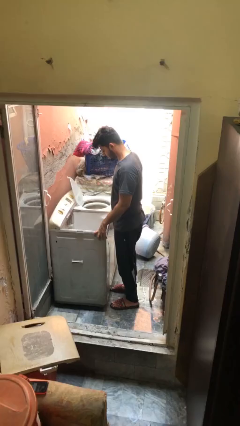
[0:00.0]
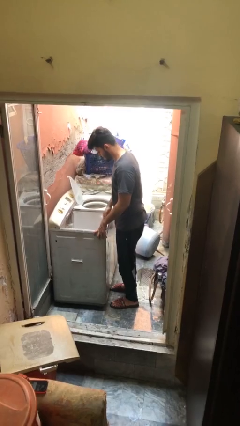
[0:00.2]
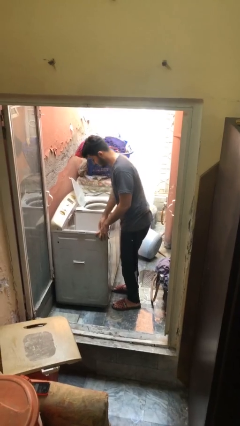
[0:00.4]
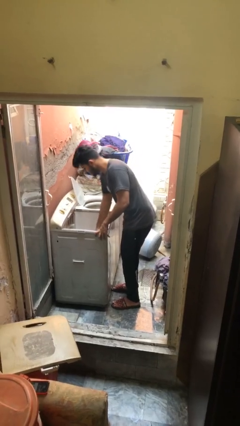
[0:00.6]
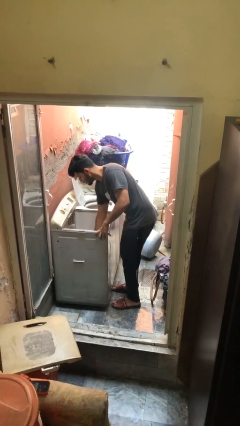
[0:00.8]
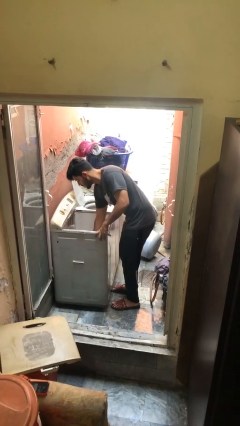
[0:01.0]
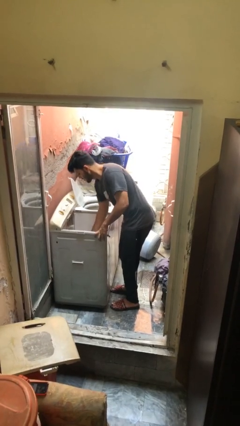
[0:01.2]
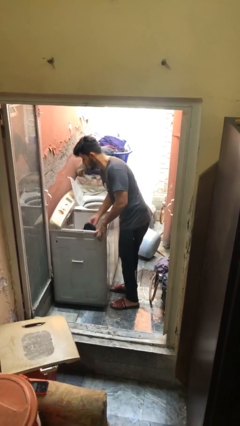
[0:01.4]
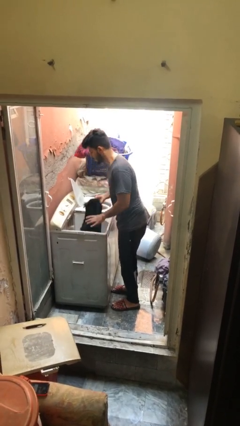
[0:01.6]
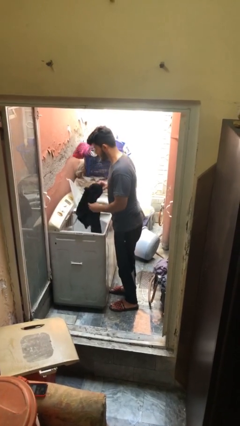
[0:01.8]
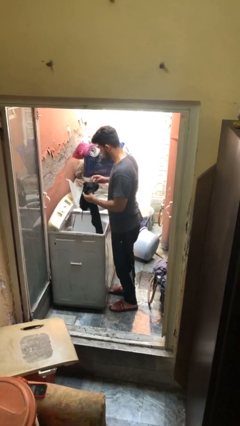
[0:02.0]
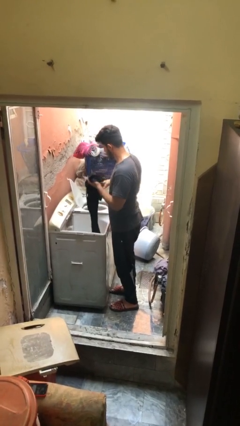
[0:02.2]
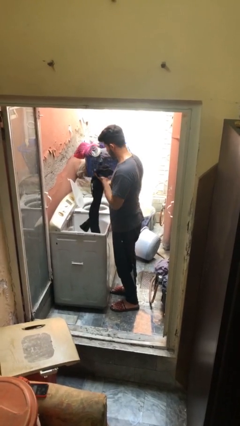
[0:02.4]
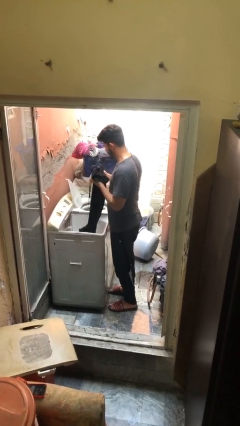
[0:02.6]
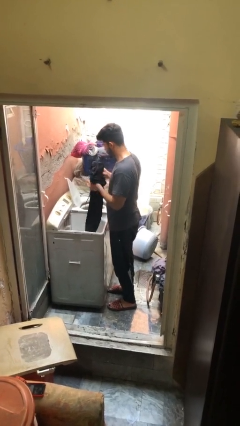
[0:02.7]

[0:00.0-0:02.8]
person unloads clotheswasher

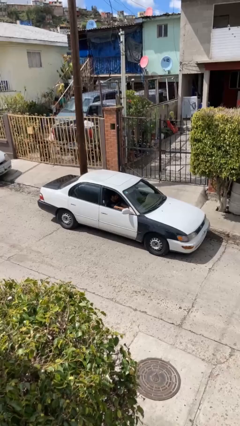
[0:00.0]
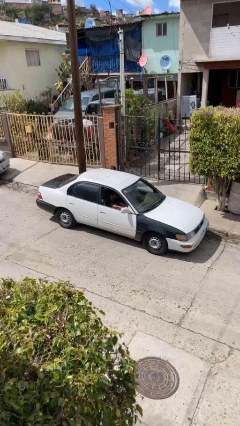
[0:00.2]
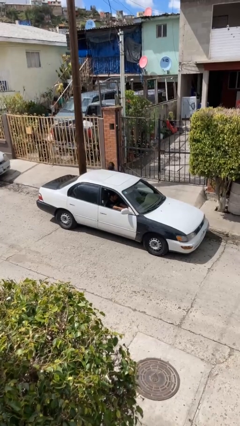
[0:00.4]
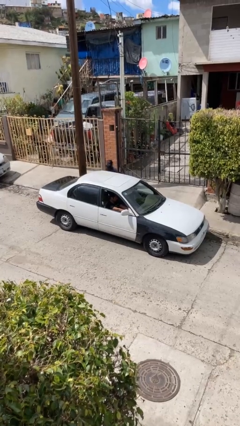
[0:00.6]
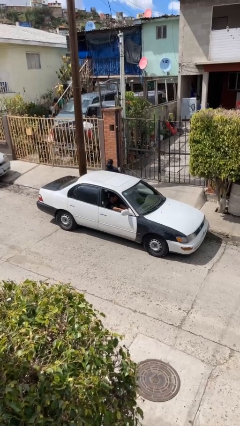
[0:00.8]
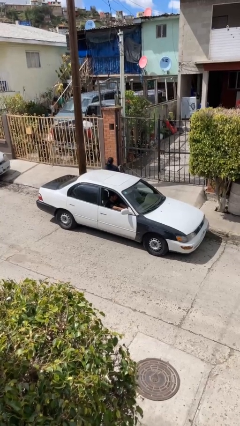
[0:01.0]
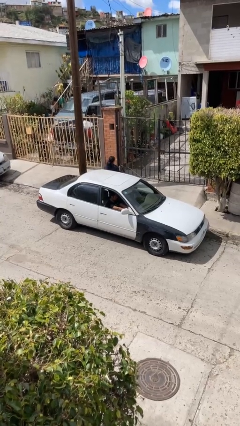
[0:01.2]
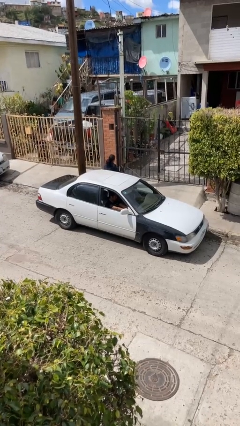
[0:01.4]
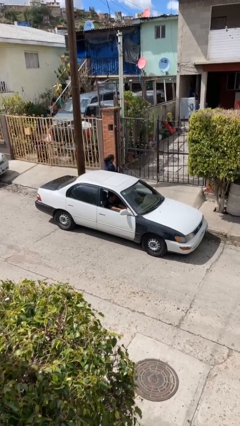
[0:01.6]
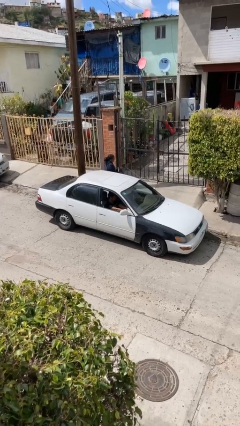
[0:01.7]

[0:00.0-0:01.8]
car drops off person

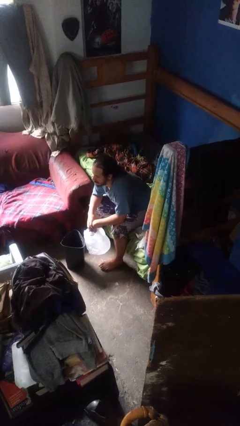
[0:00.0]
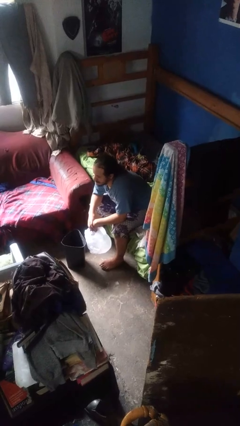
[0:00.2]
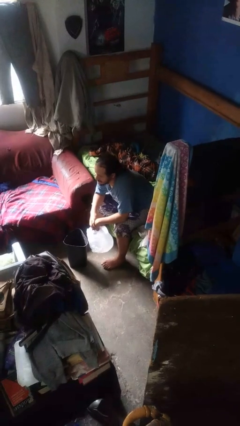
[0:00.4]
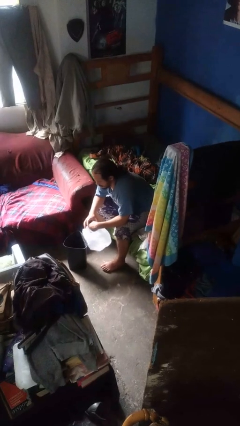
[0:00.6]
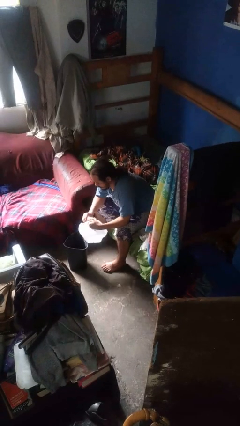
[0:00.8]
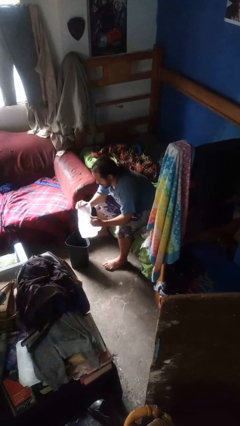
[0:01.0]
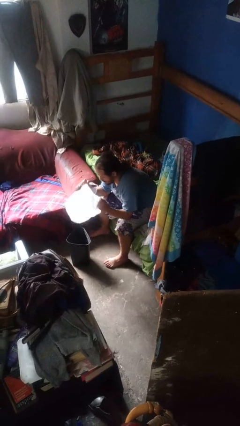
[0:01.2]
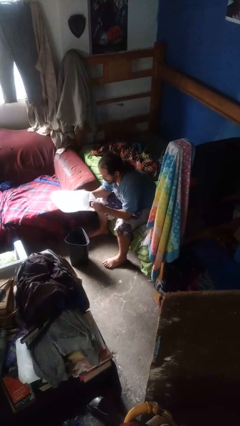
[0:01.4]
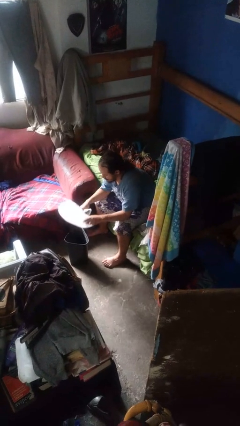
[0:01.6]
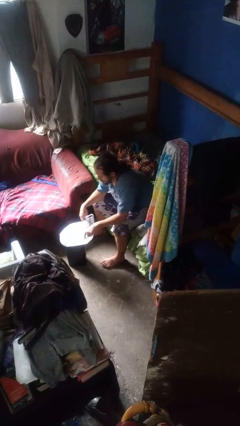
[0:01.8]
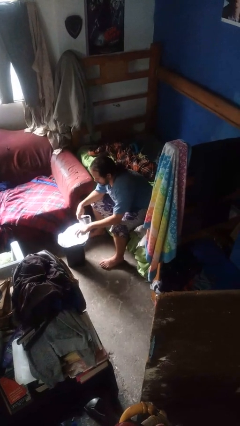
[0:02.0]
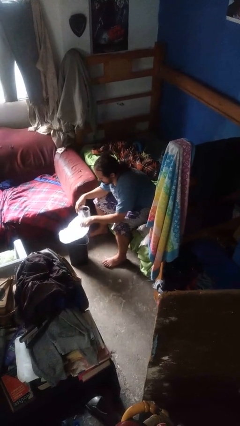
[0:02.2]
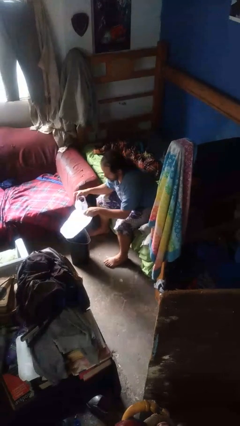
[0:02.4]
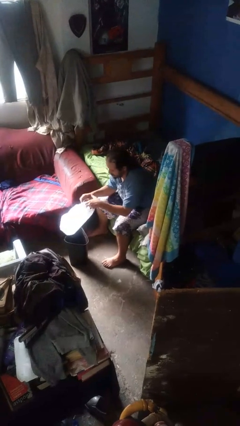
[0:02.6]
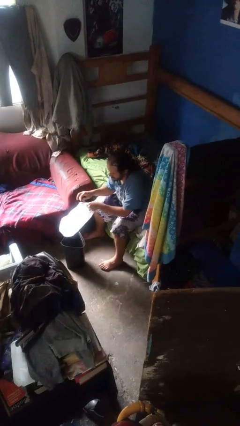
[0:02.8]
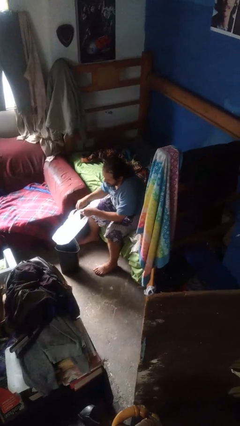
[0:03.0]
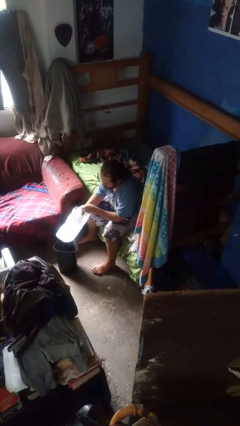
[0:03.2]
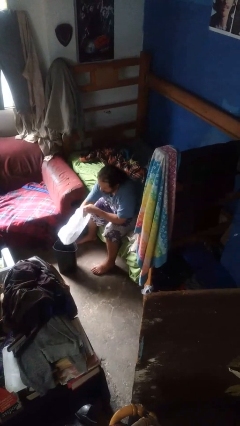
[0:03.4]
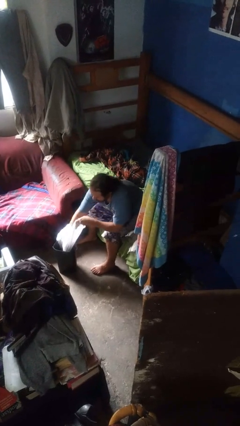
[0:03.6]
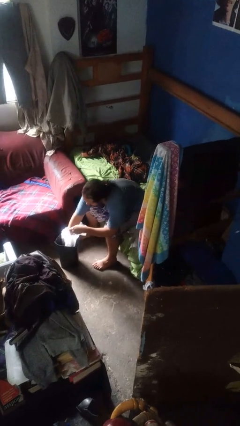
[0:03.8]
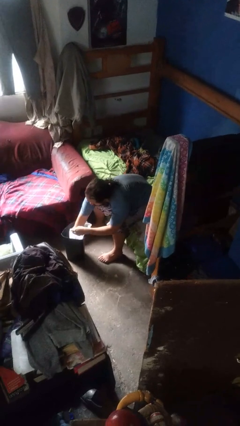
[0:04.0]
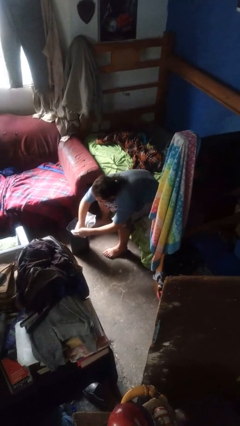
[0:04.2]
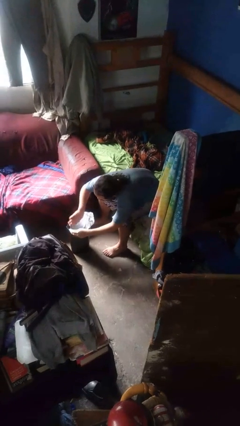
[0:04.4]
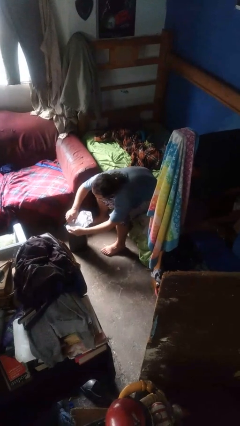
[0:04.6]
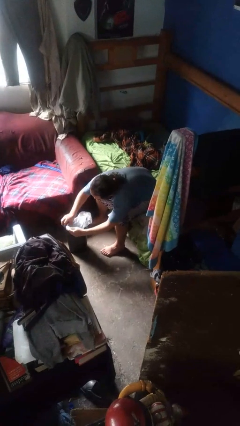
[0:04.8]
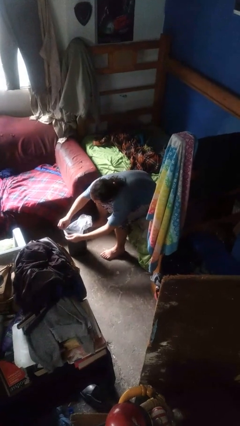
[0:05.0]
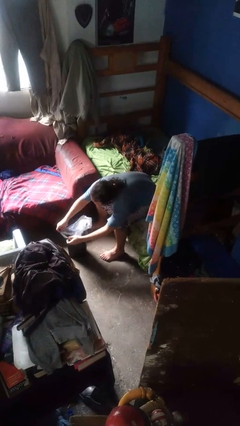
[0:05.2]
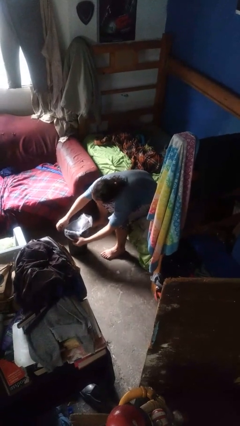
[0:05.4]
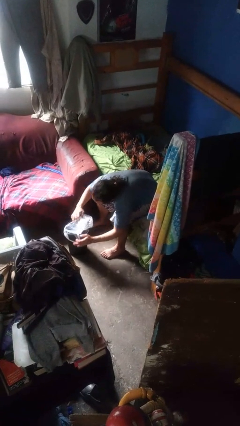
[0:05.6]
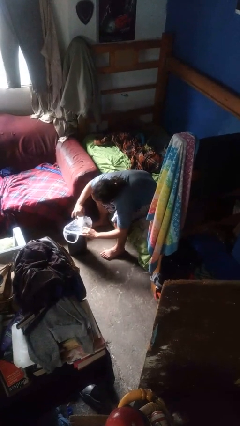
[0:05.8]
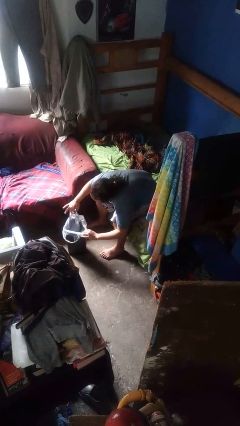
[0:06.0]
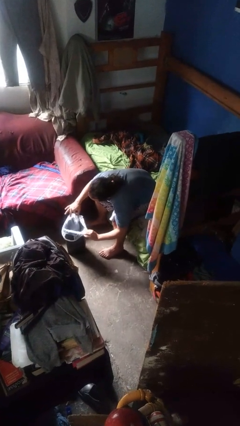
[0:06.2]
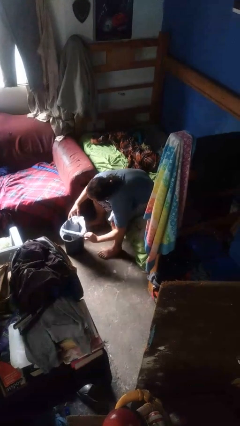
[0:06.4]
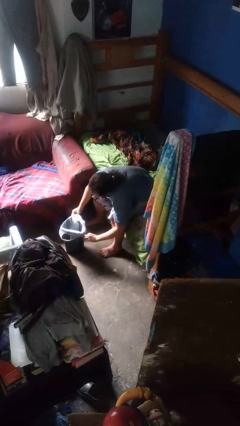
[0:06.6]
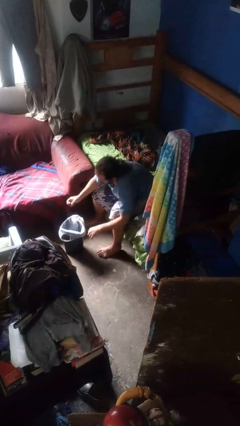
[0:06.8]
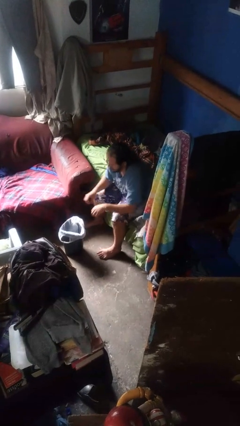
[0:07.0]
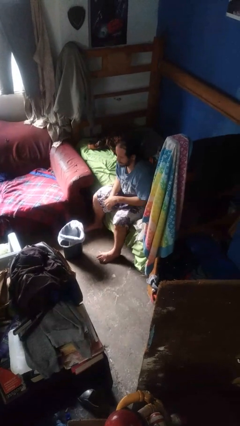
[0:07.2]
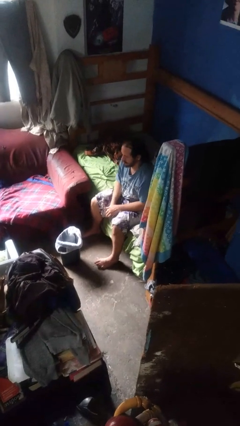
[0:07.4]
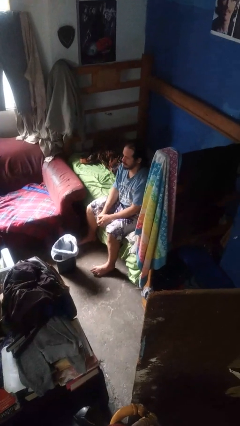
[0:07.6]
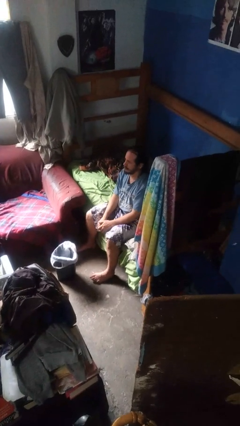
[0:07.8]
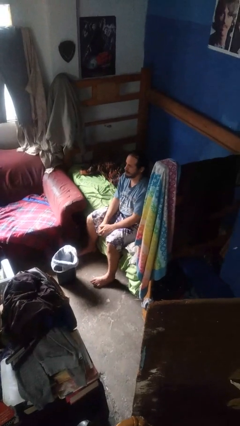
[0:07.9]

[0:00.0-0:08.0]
person inserts trashbag into trashcan

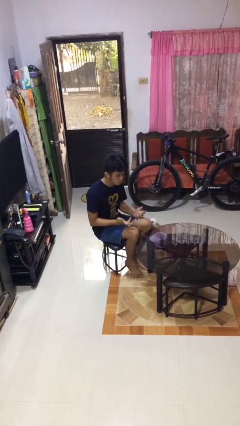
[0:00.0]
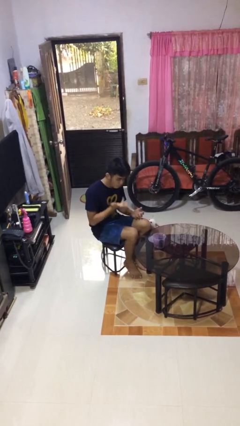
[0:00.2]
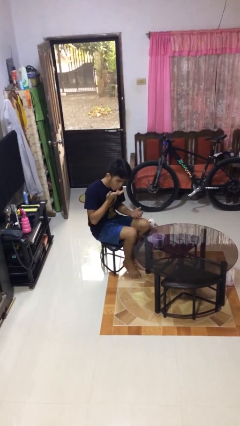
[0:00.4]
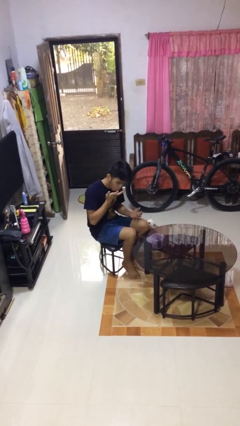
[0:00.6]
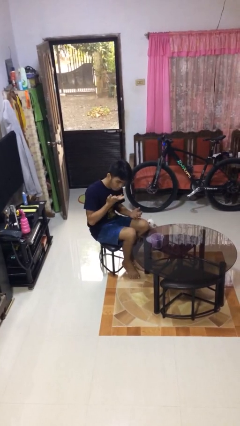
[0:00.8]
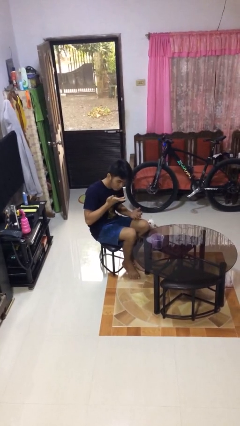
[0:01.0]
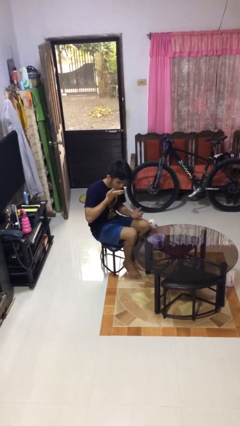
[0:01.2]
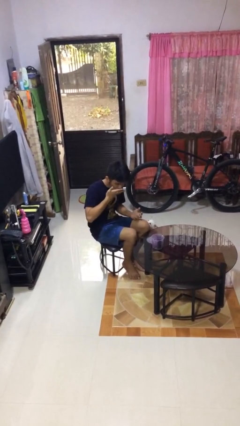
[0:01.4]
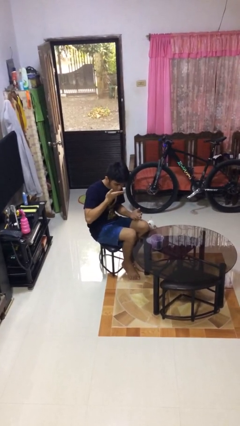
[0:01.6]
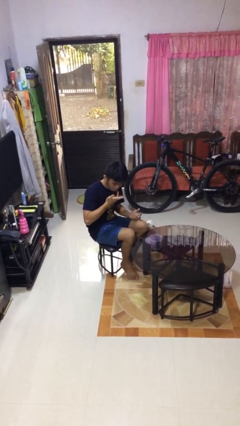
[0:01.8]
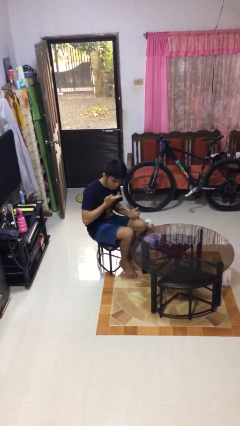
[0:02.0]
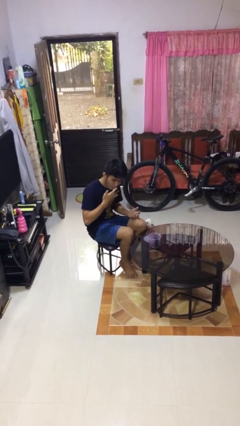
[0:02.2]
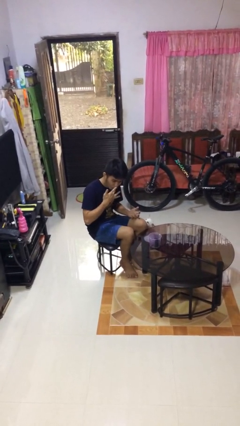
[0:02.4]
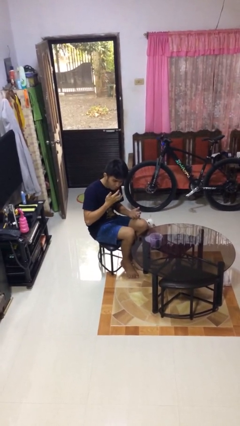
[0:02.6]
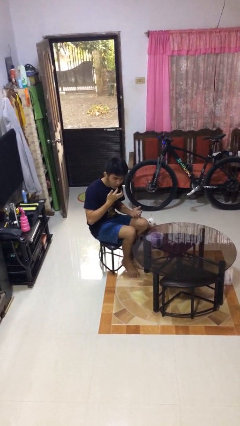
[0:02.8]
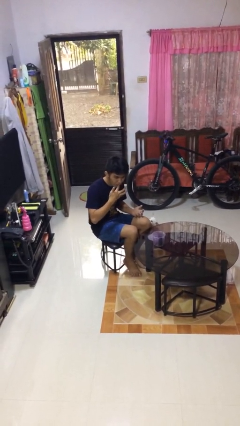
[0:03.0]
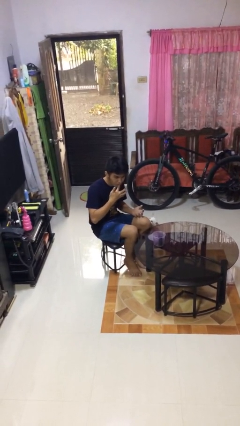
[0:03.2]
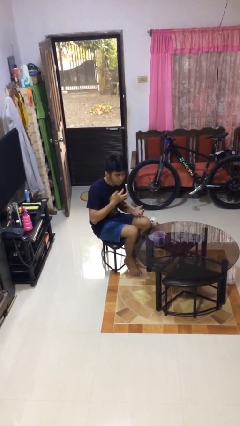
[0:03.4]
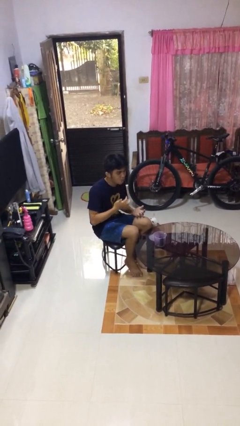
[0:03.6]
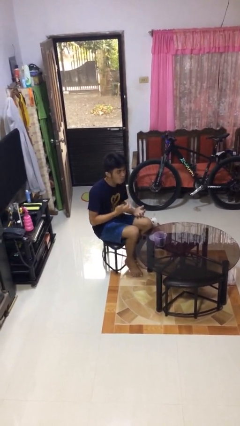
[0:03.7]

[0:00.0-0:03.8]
person licks fingers

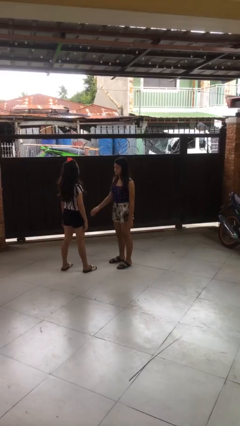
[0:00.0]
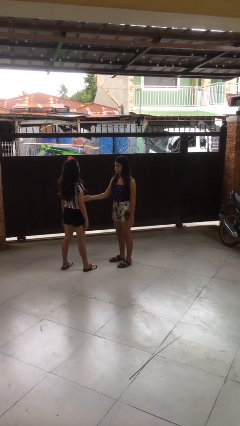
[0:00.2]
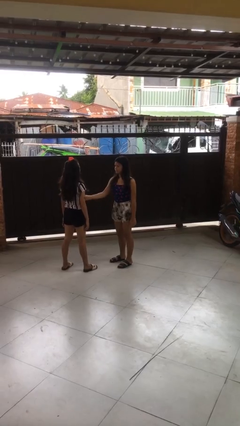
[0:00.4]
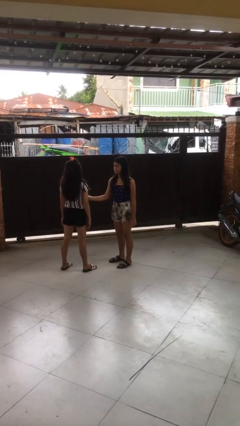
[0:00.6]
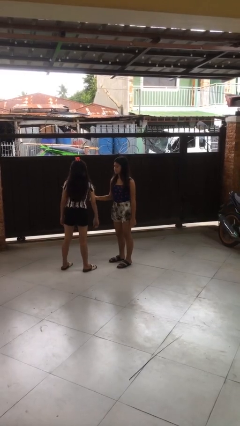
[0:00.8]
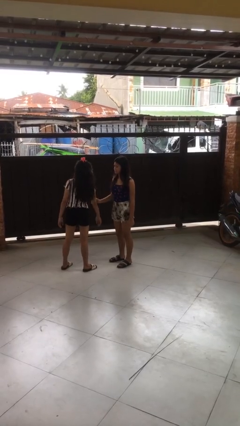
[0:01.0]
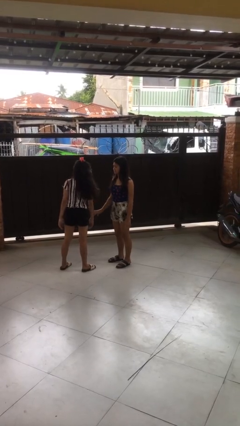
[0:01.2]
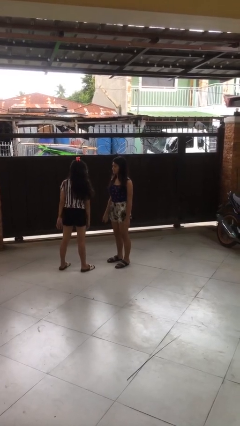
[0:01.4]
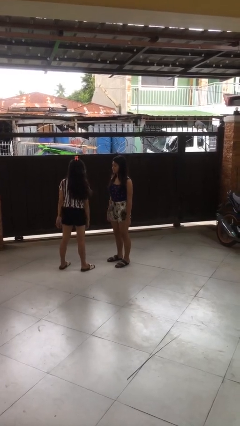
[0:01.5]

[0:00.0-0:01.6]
person grabs person by bicep
